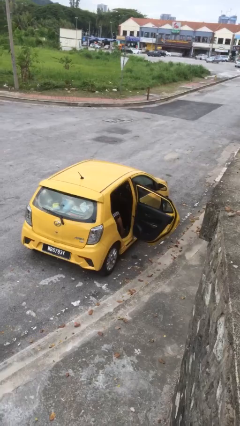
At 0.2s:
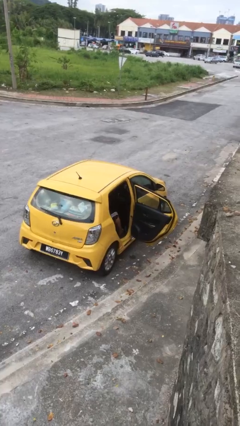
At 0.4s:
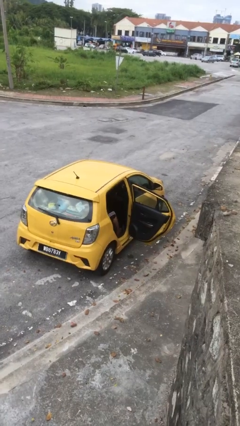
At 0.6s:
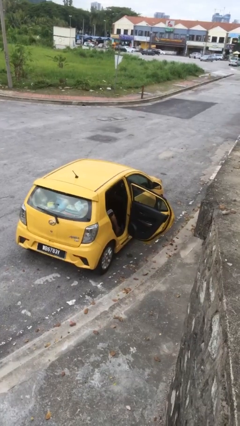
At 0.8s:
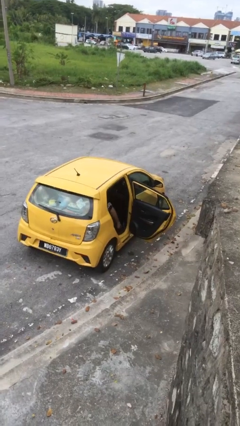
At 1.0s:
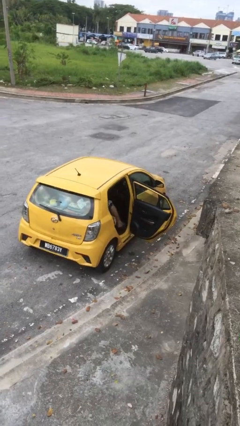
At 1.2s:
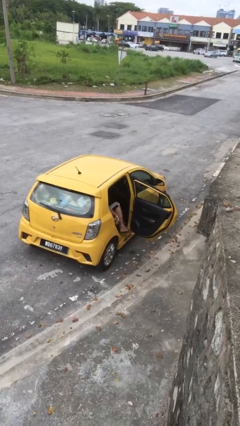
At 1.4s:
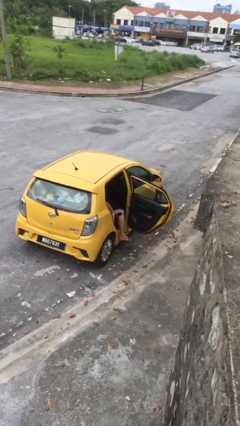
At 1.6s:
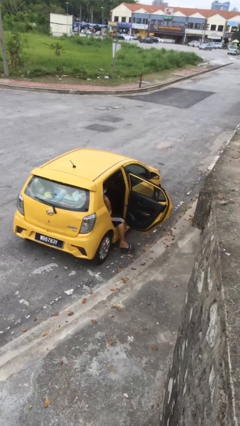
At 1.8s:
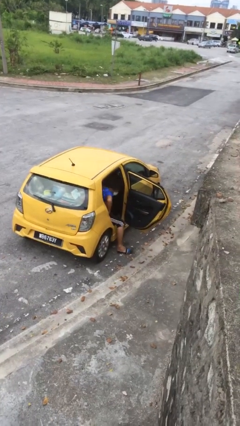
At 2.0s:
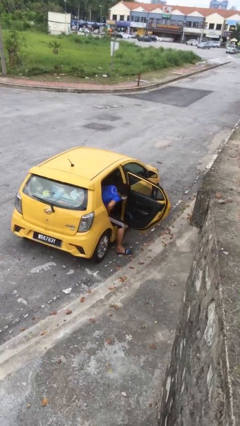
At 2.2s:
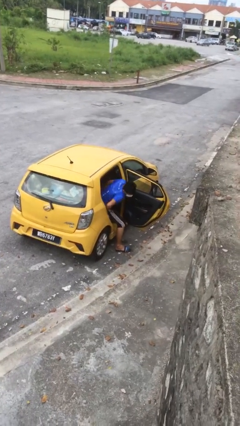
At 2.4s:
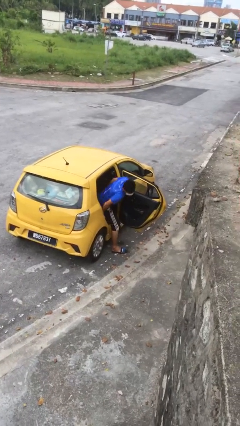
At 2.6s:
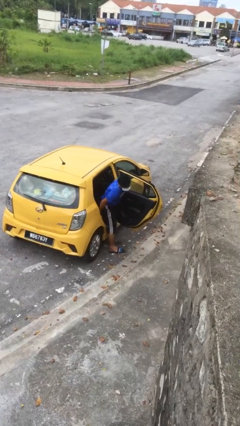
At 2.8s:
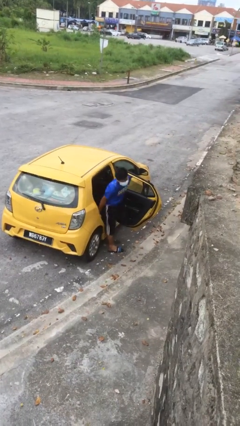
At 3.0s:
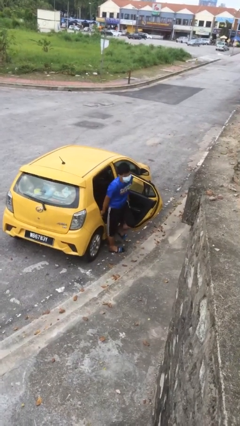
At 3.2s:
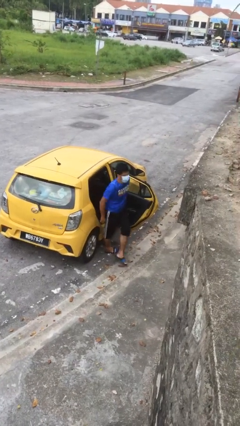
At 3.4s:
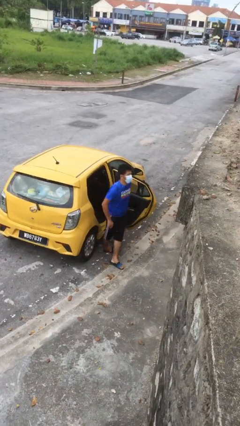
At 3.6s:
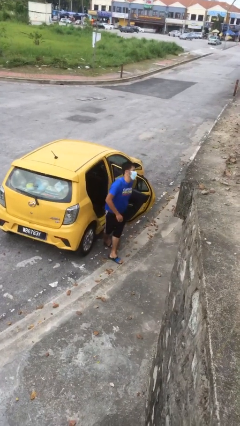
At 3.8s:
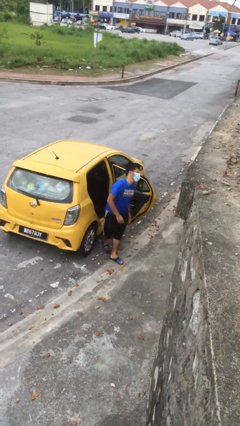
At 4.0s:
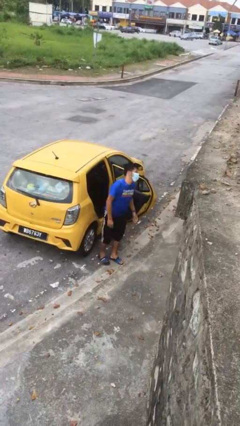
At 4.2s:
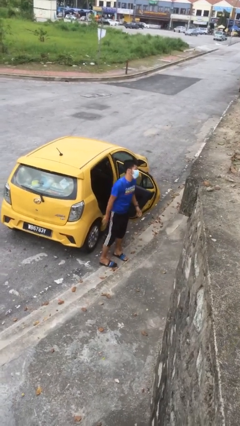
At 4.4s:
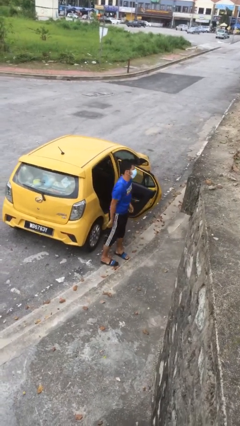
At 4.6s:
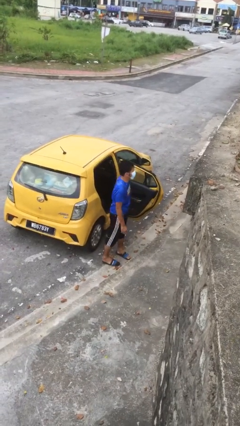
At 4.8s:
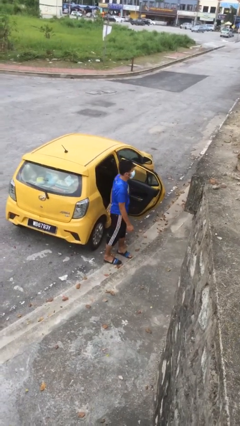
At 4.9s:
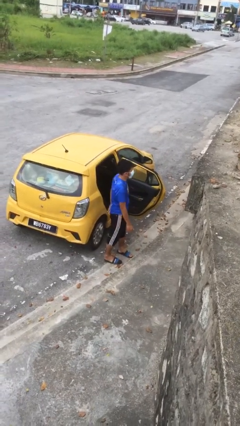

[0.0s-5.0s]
person exits car

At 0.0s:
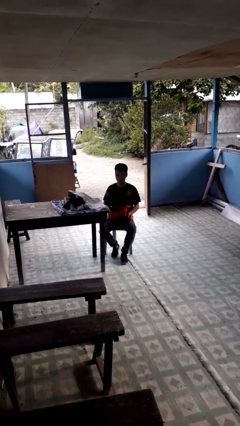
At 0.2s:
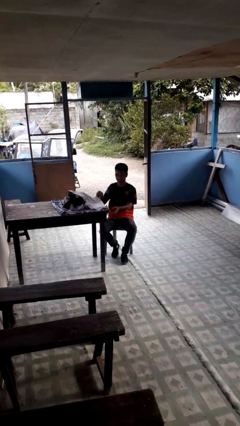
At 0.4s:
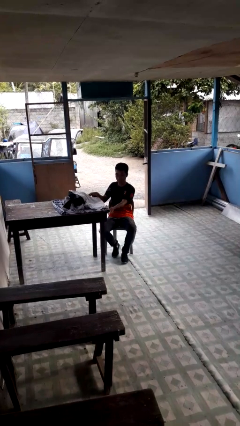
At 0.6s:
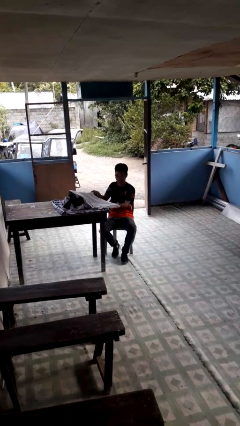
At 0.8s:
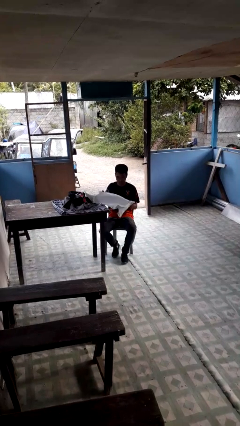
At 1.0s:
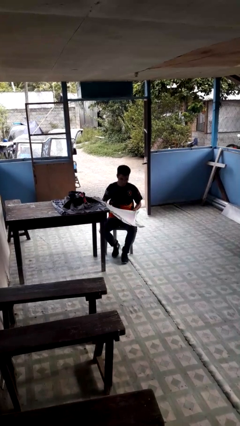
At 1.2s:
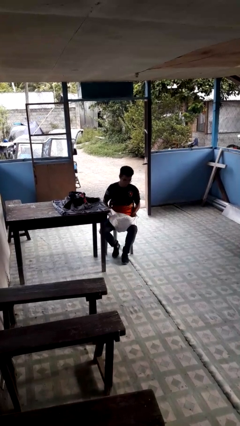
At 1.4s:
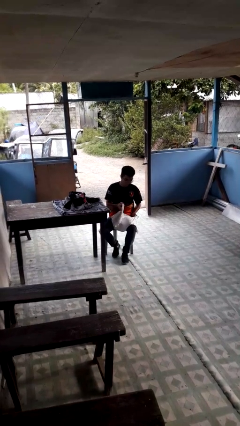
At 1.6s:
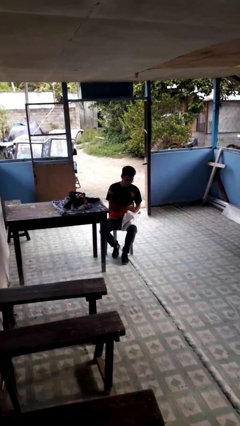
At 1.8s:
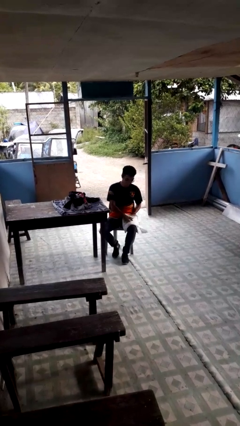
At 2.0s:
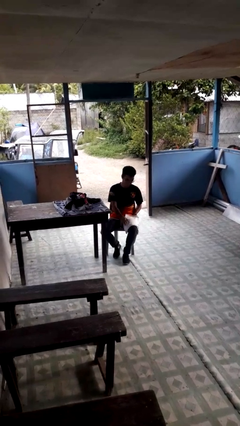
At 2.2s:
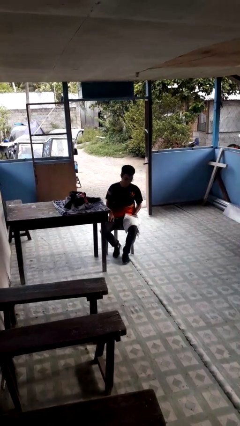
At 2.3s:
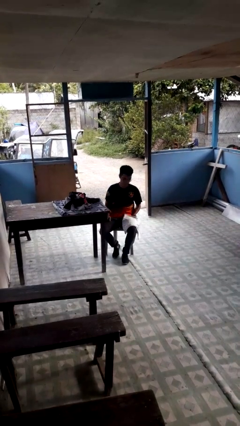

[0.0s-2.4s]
person folds shirt

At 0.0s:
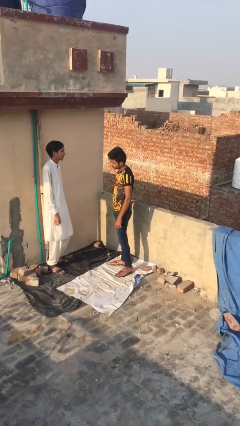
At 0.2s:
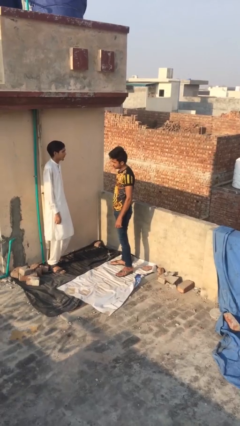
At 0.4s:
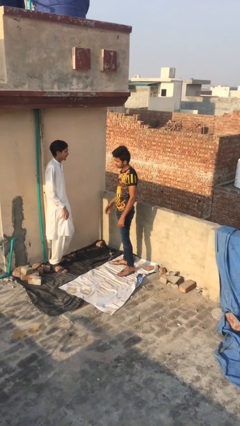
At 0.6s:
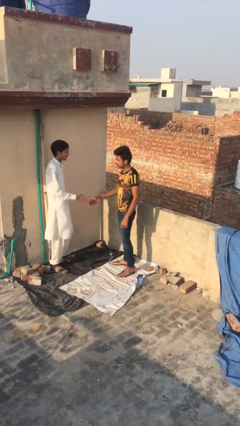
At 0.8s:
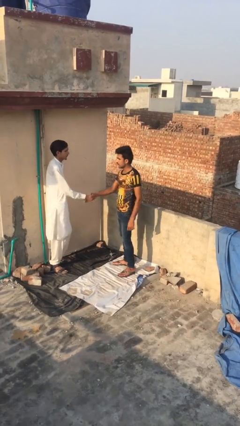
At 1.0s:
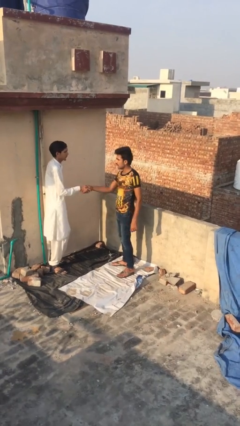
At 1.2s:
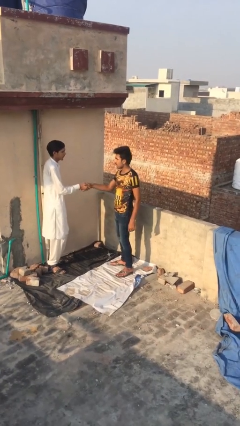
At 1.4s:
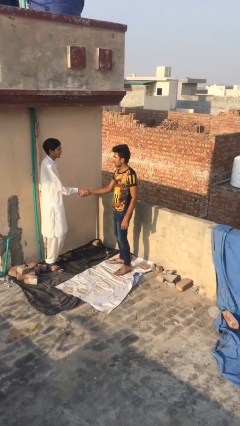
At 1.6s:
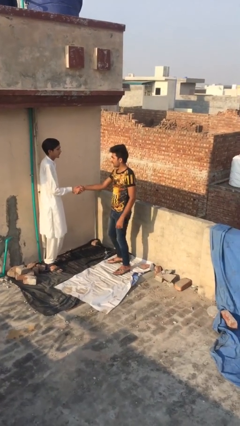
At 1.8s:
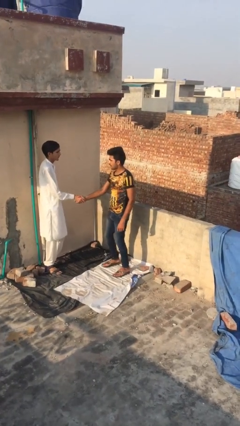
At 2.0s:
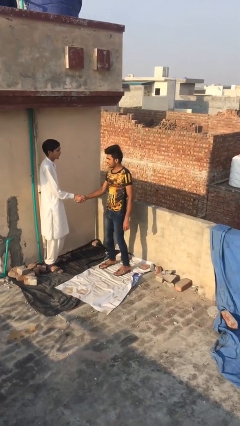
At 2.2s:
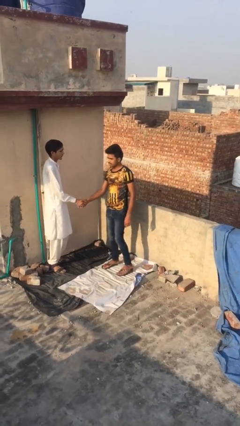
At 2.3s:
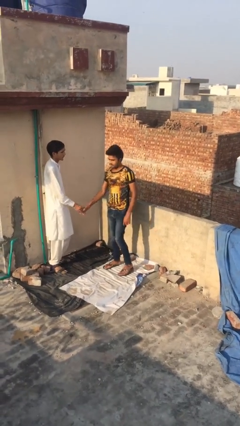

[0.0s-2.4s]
person shakes hand

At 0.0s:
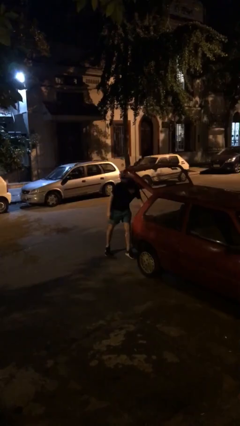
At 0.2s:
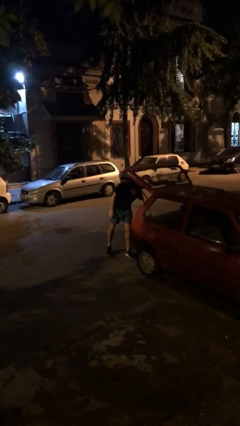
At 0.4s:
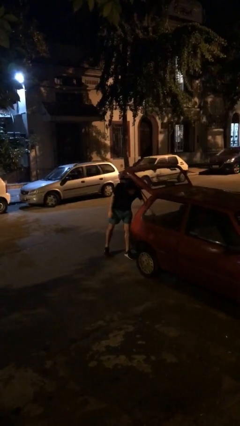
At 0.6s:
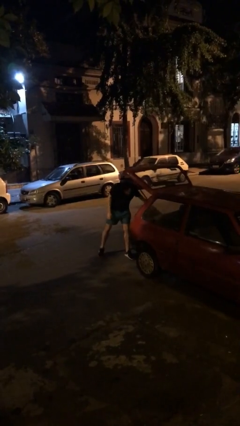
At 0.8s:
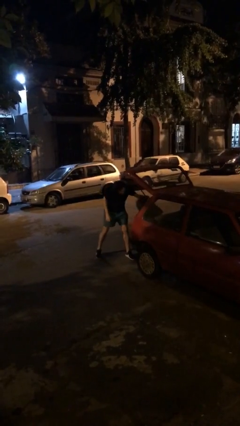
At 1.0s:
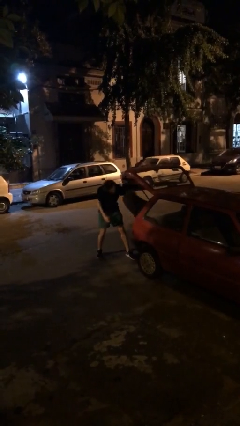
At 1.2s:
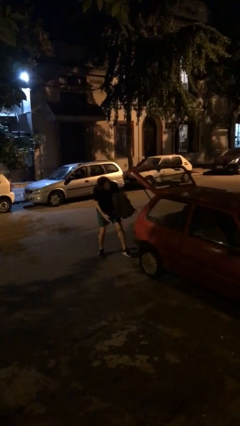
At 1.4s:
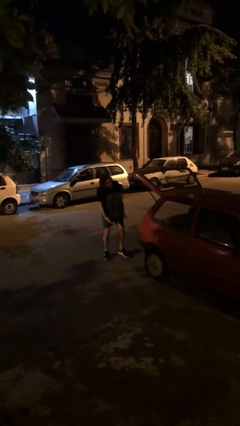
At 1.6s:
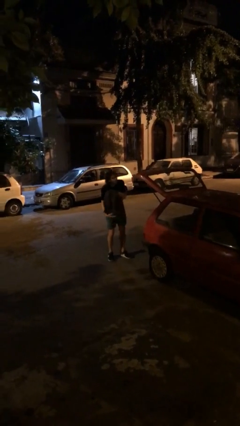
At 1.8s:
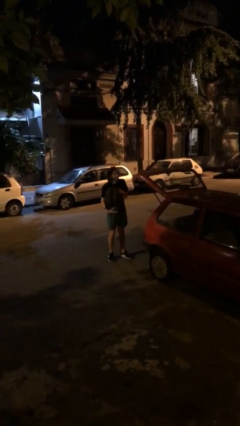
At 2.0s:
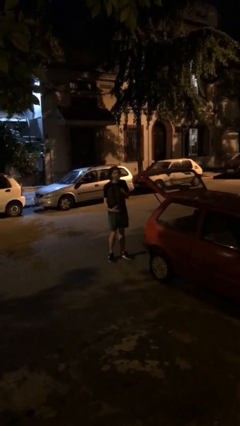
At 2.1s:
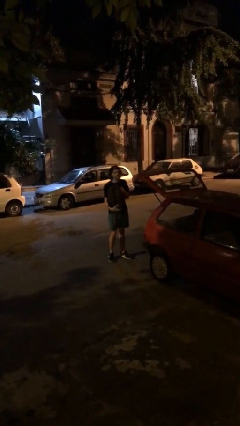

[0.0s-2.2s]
person unloads car

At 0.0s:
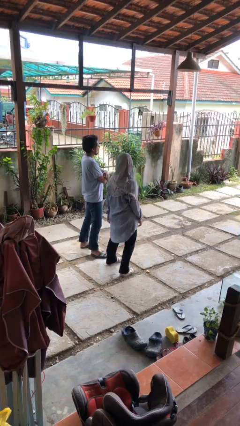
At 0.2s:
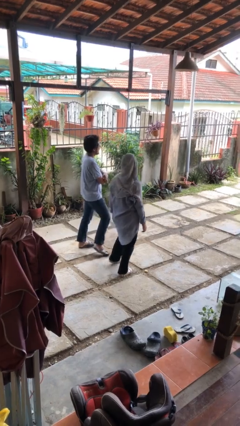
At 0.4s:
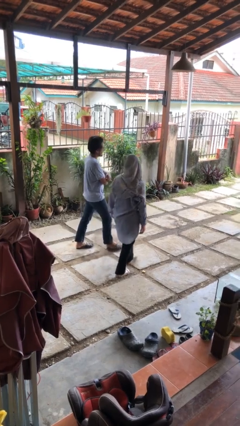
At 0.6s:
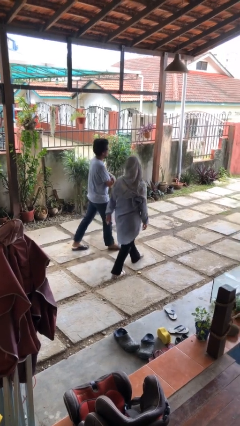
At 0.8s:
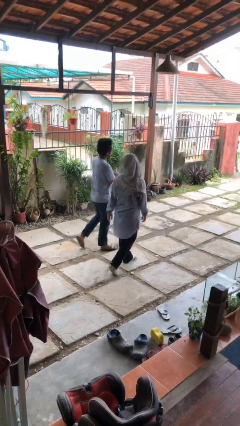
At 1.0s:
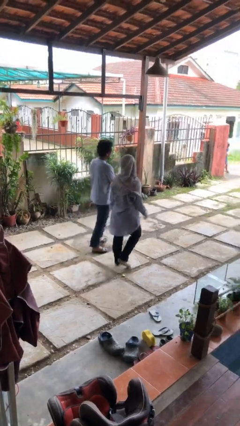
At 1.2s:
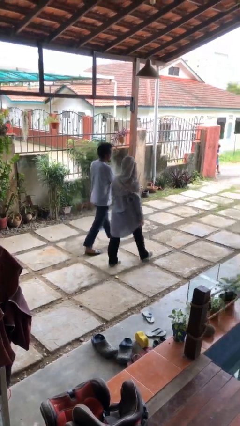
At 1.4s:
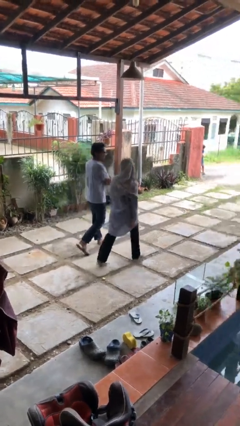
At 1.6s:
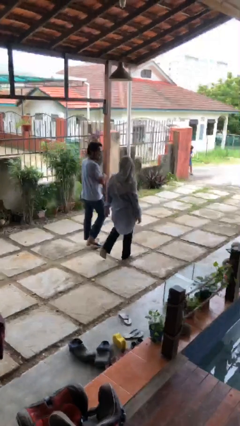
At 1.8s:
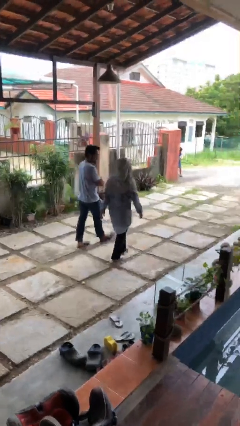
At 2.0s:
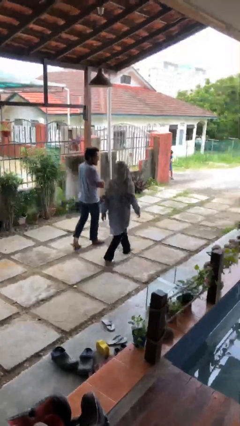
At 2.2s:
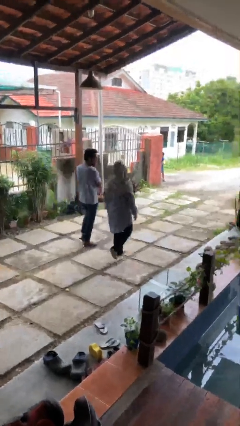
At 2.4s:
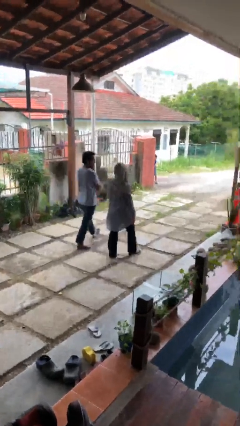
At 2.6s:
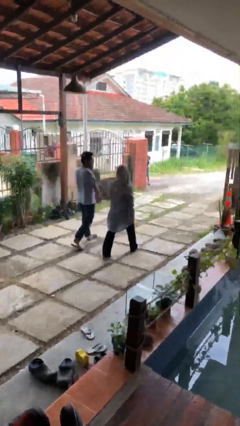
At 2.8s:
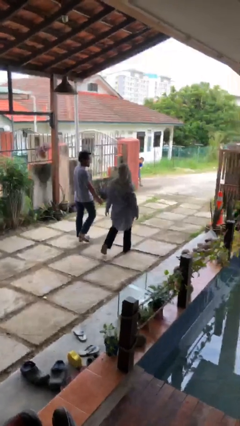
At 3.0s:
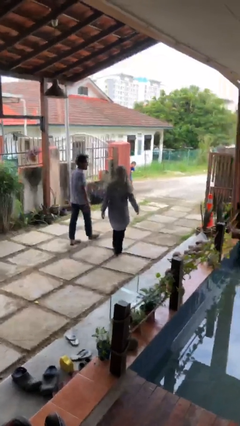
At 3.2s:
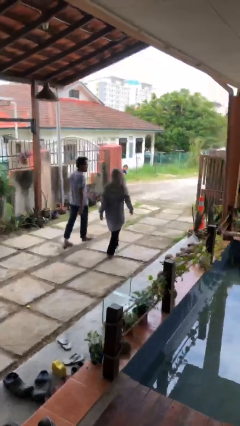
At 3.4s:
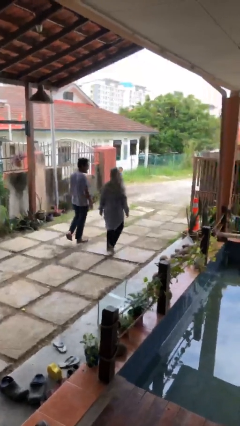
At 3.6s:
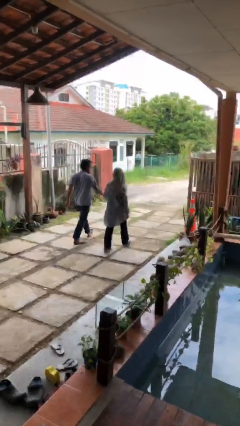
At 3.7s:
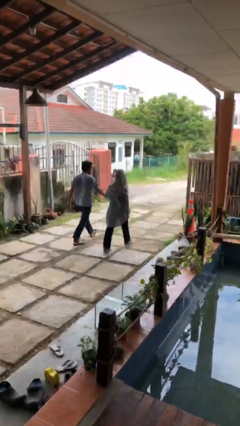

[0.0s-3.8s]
person talks to person

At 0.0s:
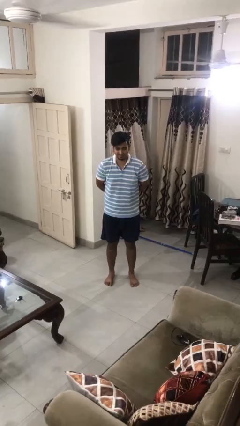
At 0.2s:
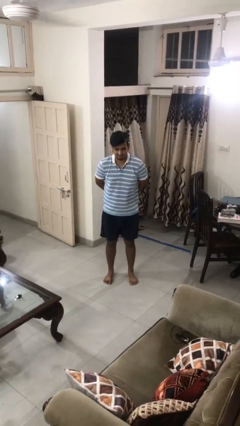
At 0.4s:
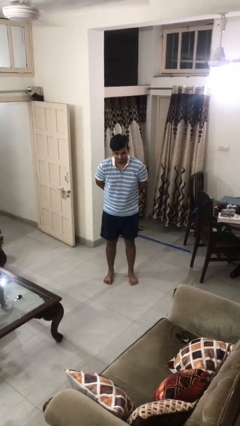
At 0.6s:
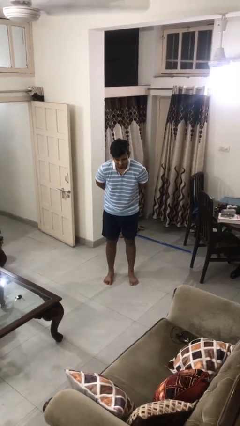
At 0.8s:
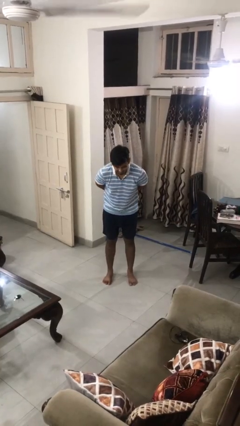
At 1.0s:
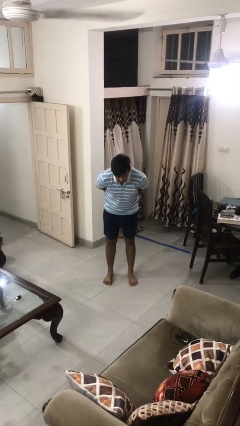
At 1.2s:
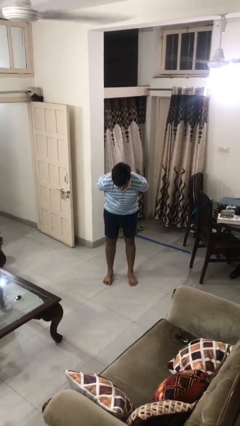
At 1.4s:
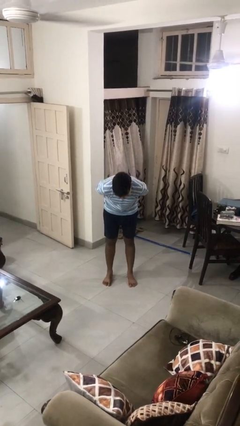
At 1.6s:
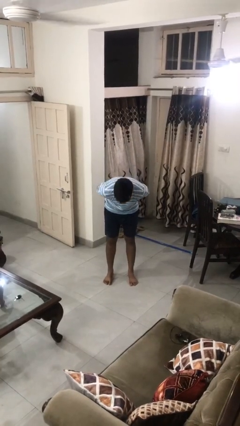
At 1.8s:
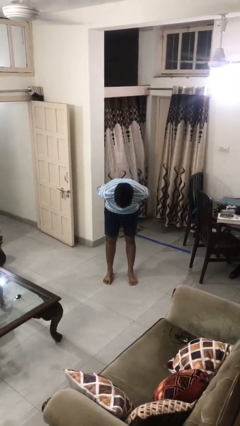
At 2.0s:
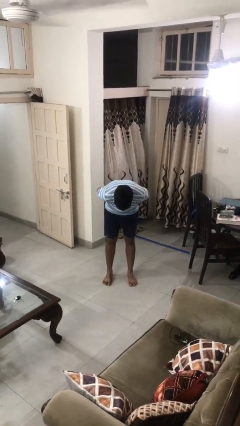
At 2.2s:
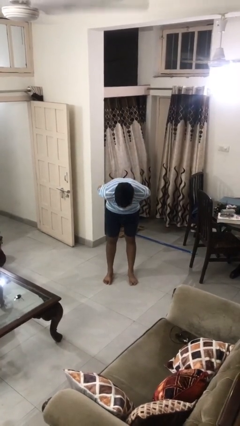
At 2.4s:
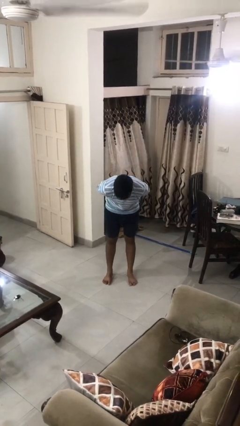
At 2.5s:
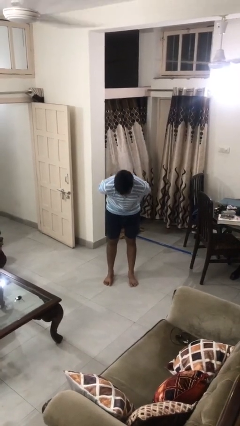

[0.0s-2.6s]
person bows
